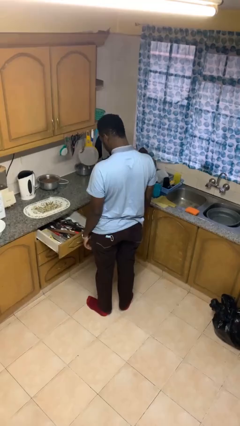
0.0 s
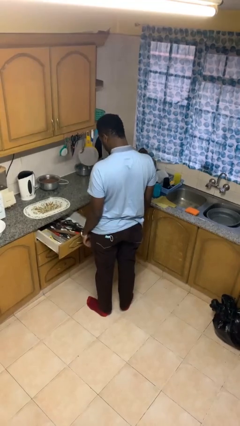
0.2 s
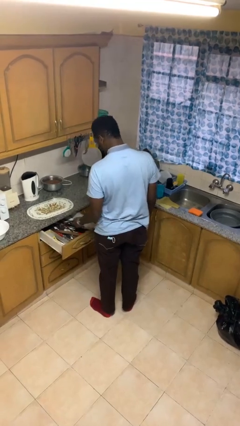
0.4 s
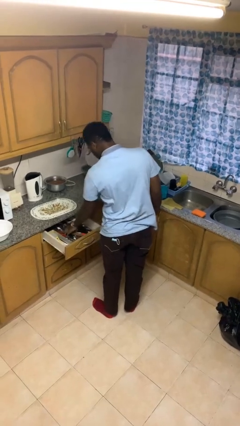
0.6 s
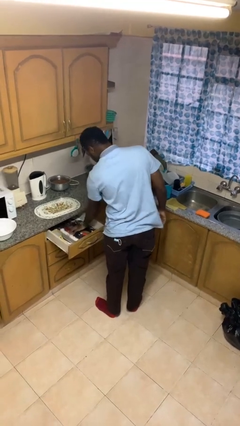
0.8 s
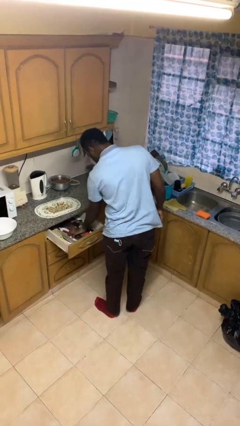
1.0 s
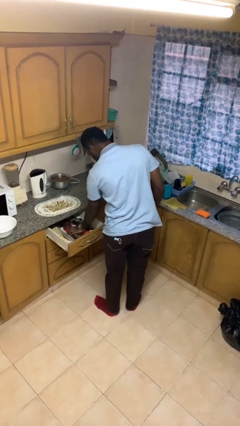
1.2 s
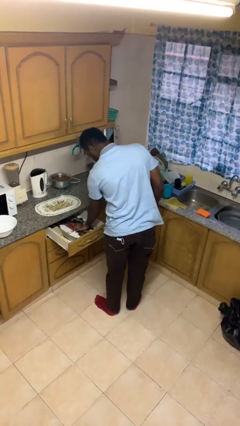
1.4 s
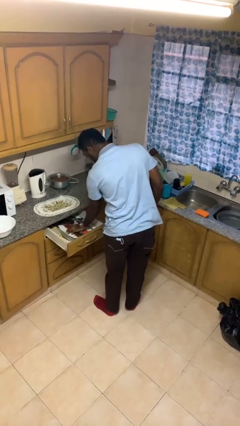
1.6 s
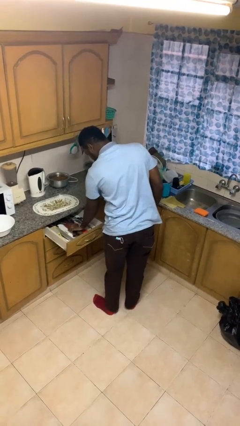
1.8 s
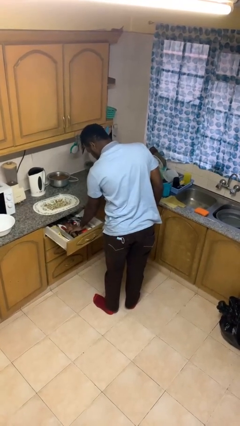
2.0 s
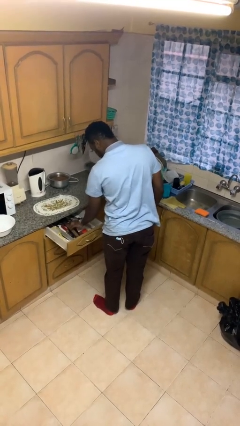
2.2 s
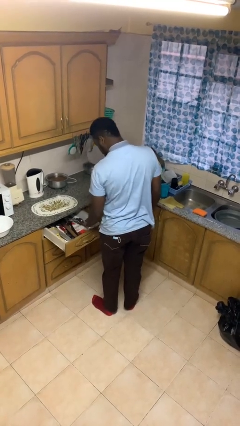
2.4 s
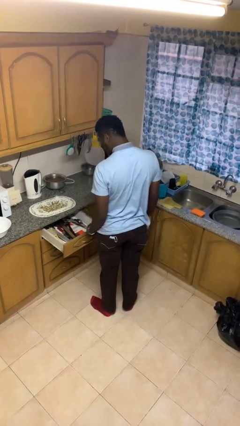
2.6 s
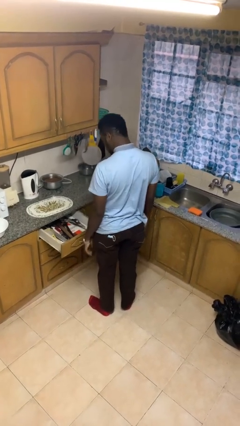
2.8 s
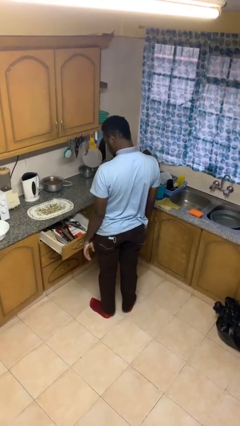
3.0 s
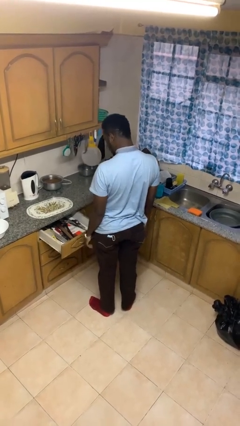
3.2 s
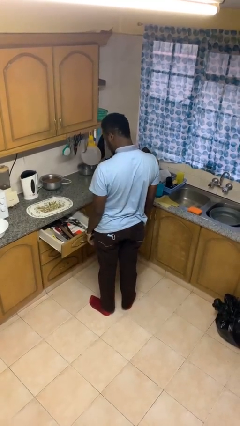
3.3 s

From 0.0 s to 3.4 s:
person searches in kitchen drawer

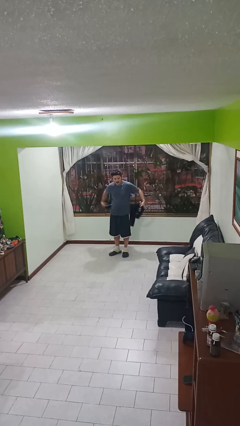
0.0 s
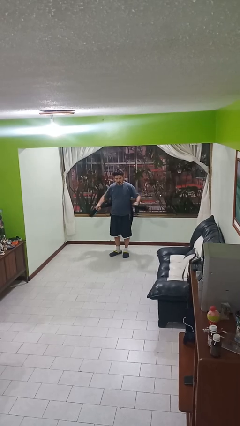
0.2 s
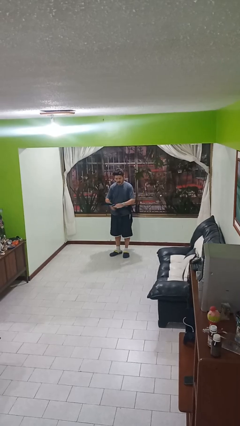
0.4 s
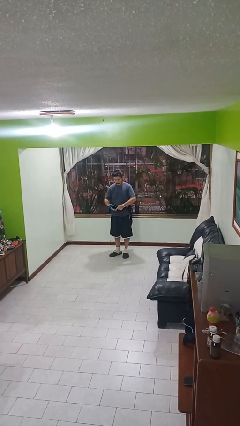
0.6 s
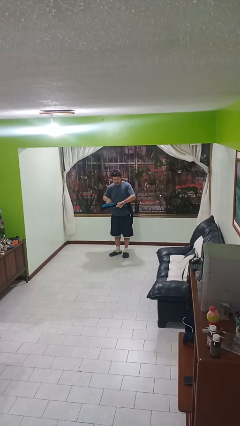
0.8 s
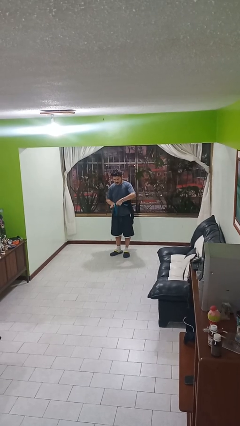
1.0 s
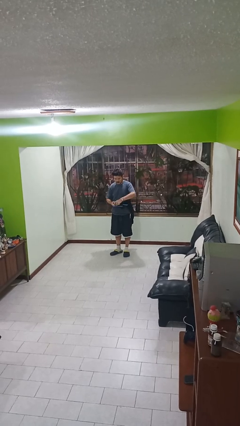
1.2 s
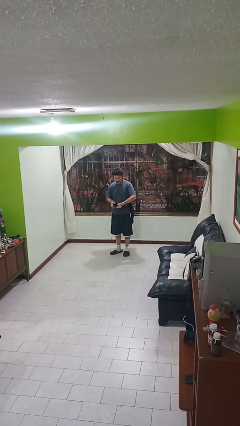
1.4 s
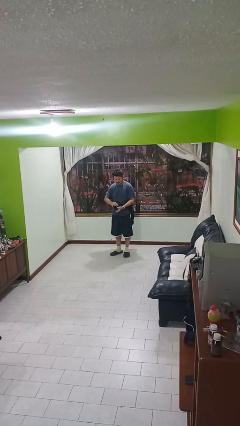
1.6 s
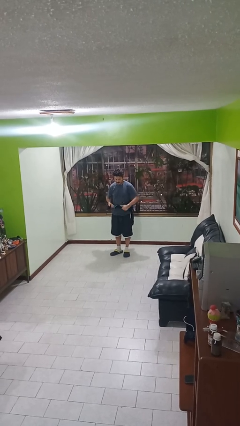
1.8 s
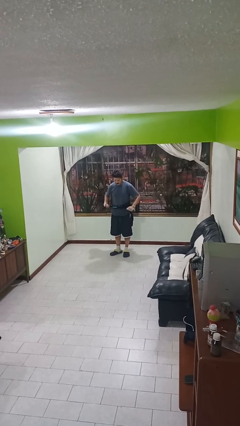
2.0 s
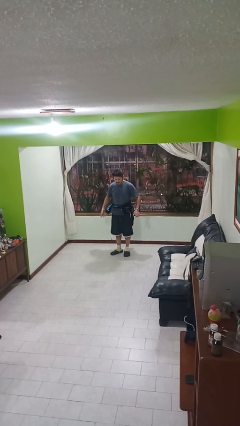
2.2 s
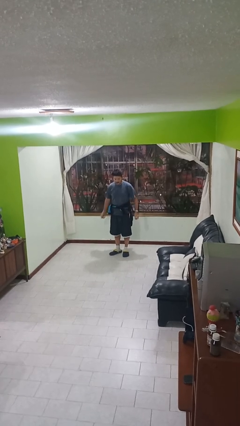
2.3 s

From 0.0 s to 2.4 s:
person ties jacket around waist

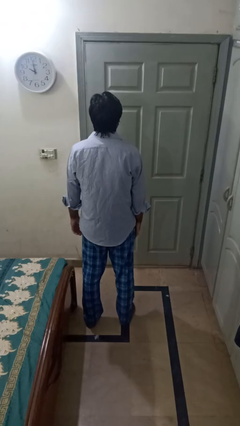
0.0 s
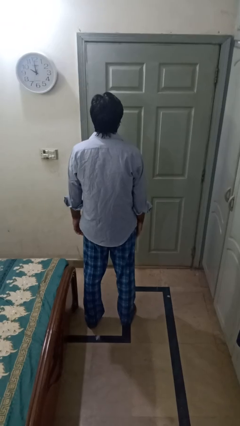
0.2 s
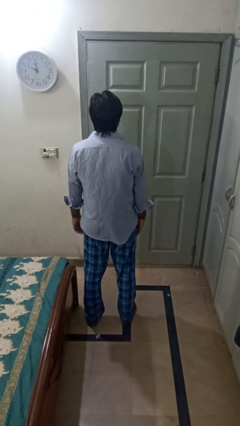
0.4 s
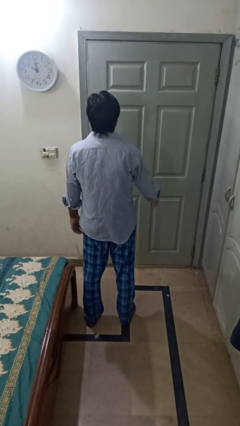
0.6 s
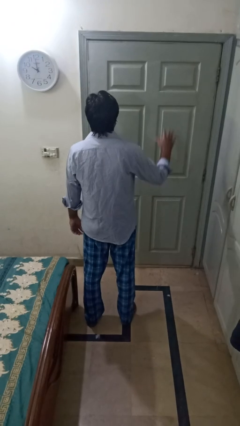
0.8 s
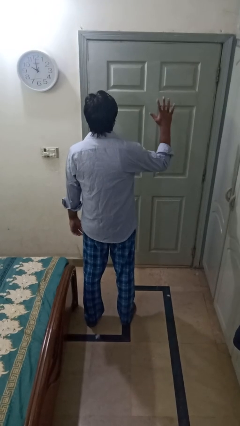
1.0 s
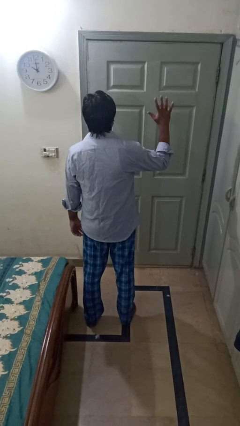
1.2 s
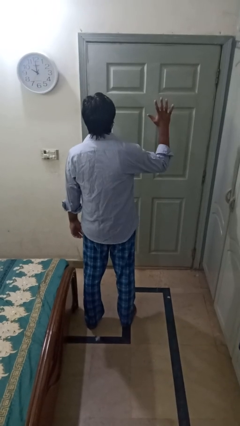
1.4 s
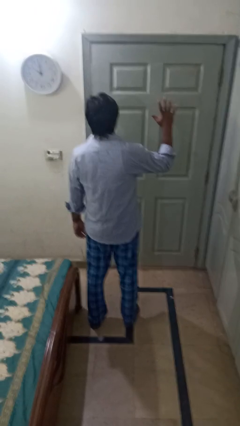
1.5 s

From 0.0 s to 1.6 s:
person gestures number five

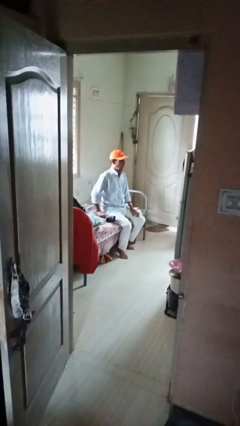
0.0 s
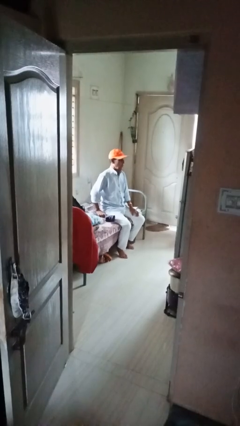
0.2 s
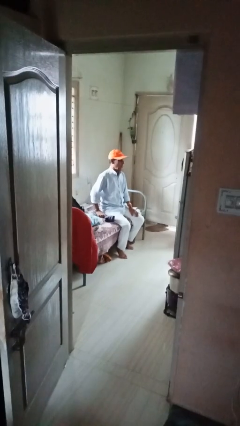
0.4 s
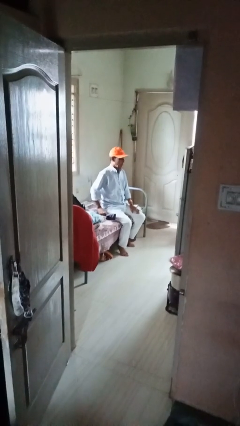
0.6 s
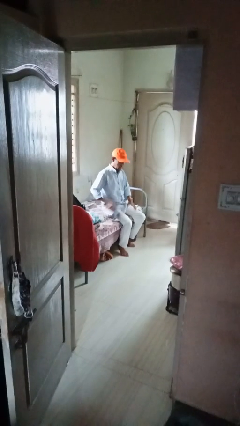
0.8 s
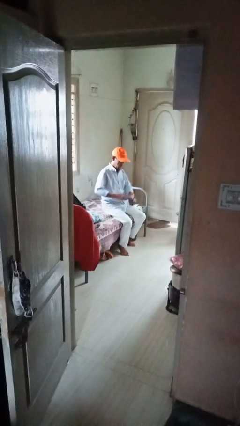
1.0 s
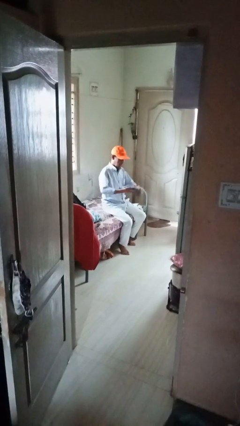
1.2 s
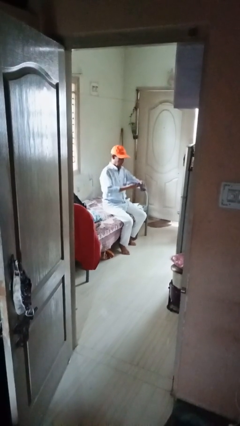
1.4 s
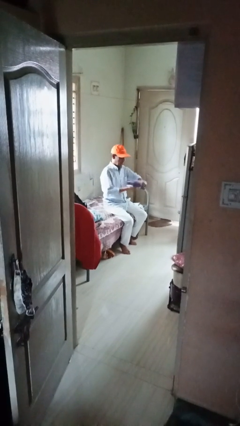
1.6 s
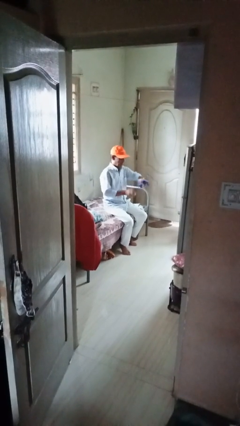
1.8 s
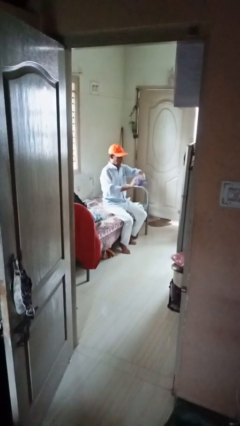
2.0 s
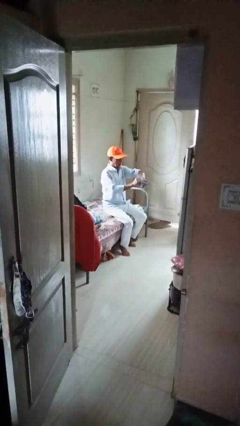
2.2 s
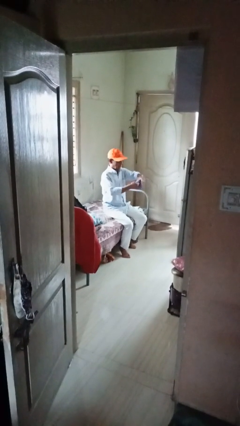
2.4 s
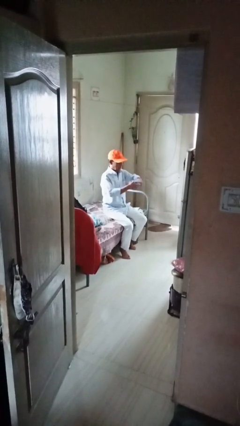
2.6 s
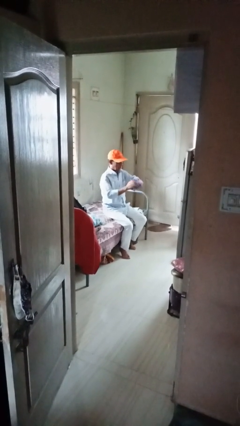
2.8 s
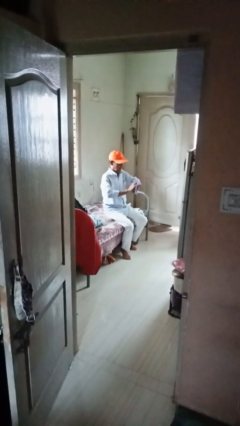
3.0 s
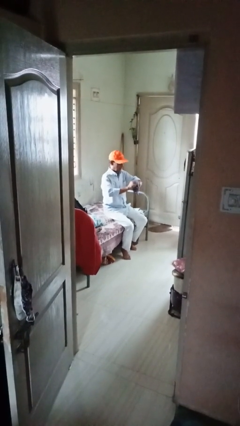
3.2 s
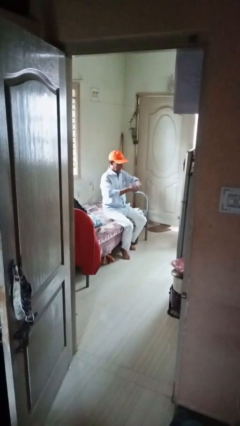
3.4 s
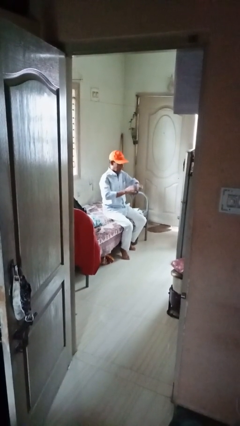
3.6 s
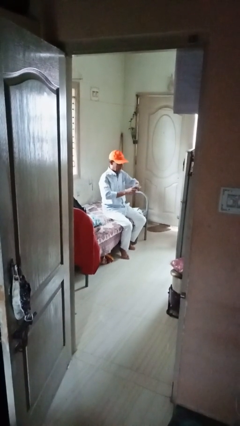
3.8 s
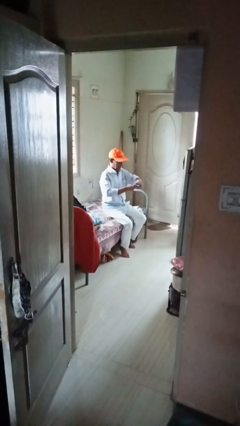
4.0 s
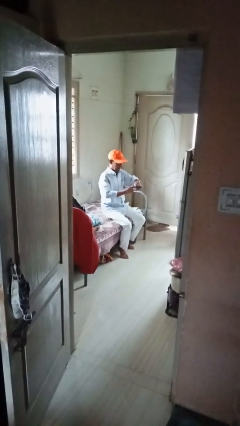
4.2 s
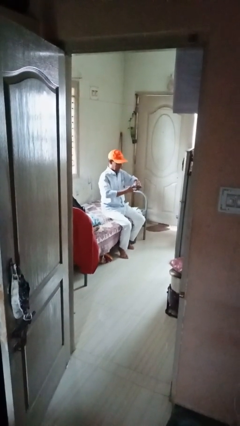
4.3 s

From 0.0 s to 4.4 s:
person squeezes object

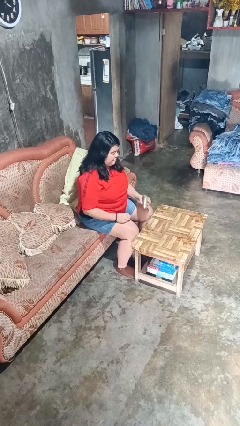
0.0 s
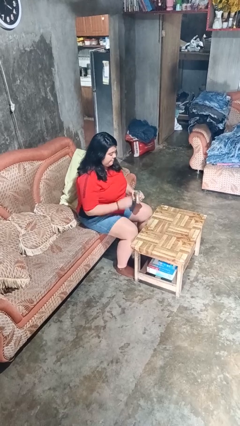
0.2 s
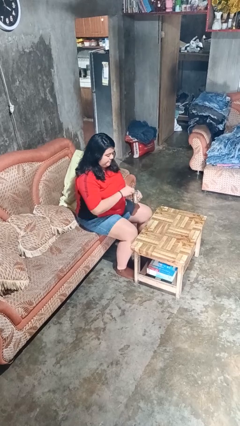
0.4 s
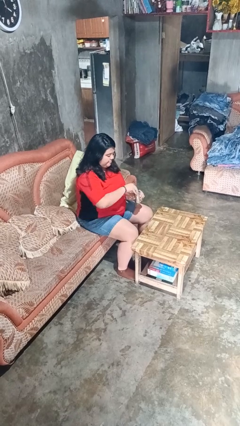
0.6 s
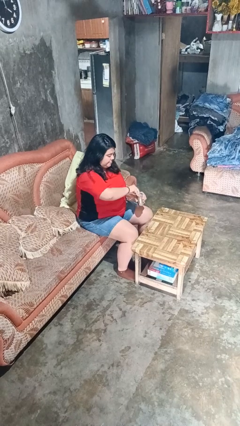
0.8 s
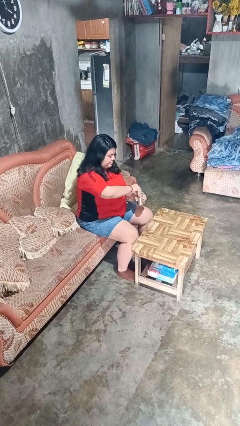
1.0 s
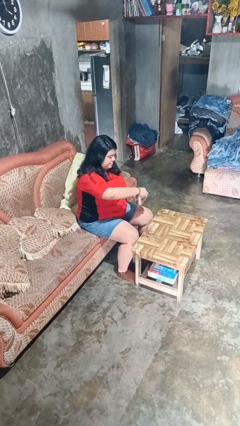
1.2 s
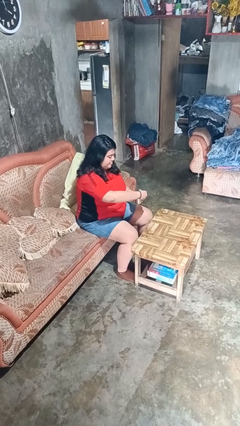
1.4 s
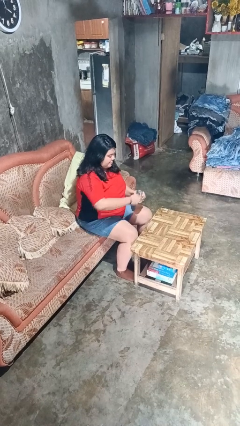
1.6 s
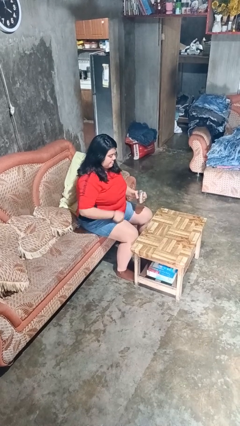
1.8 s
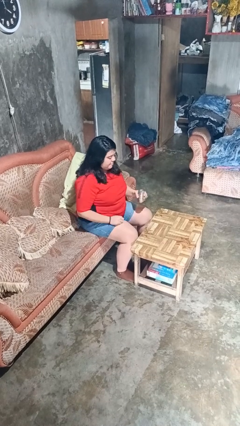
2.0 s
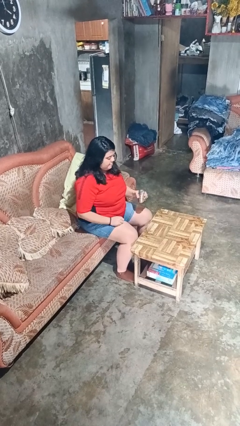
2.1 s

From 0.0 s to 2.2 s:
person opens beverage can

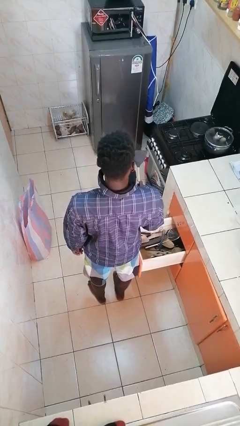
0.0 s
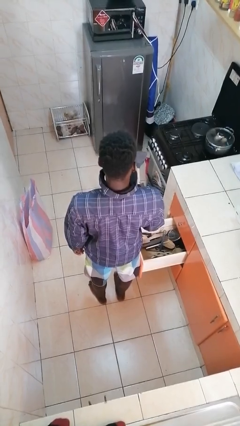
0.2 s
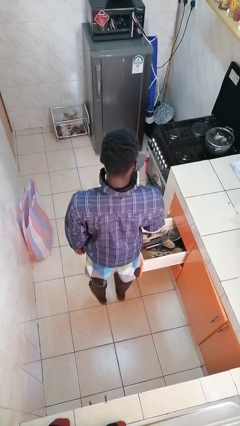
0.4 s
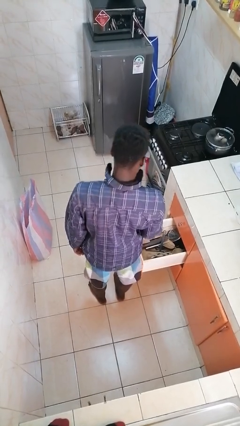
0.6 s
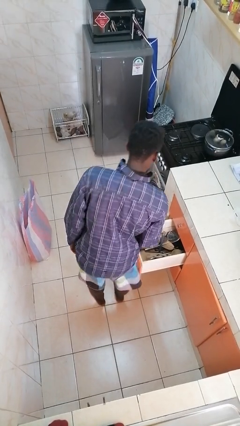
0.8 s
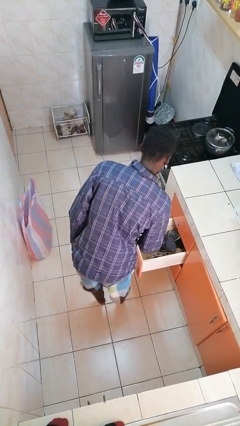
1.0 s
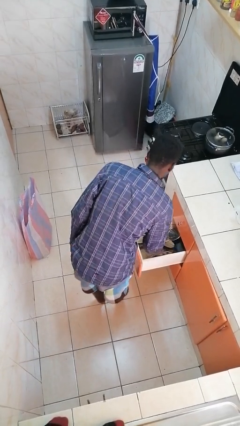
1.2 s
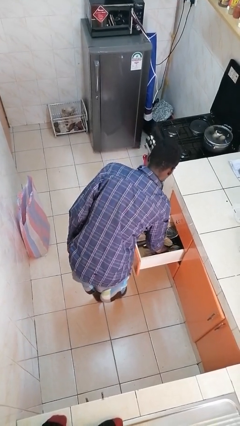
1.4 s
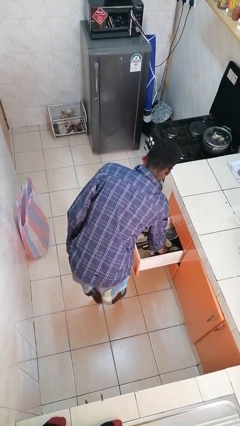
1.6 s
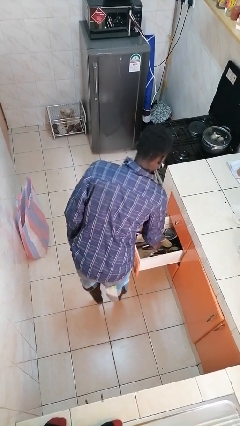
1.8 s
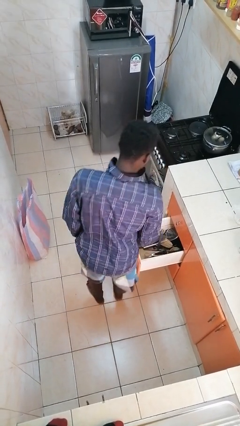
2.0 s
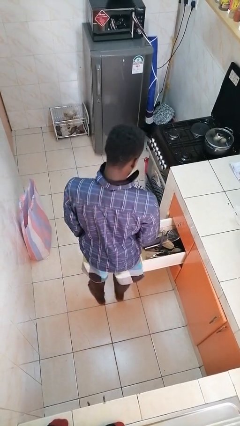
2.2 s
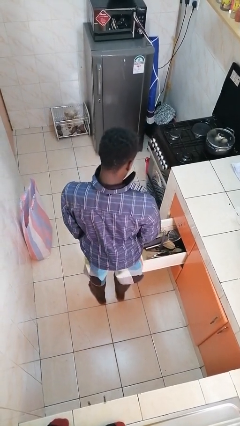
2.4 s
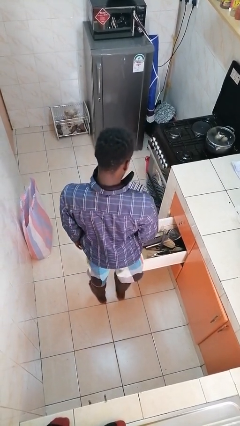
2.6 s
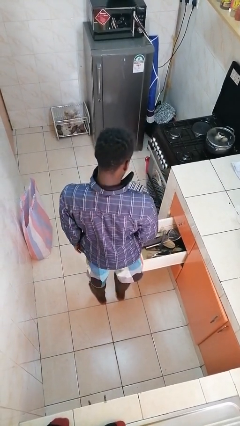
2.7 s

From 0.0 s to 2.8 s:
person puts object into kitchen drawer

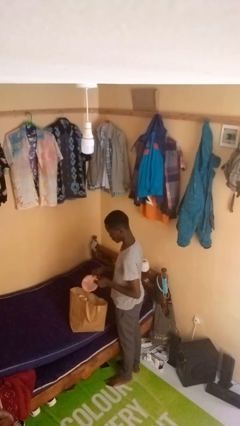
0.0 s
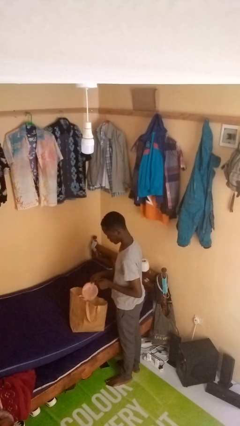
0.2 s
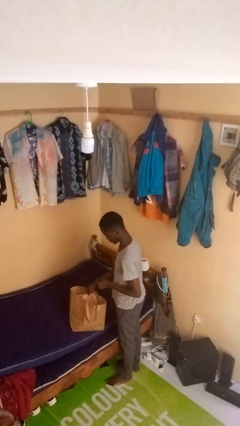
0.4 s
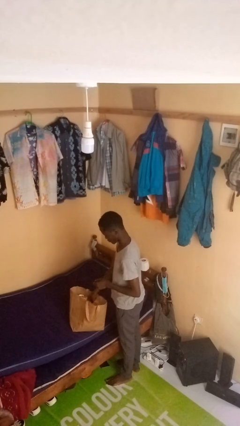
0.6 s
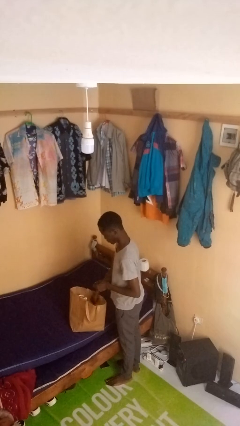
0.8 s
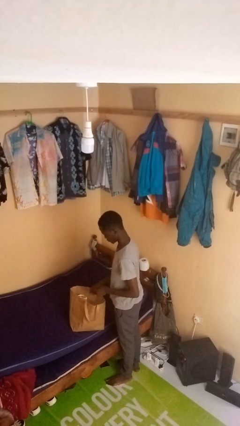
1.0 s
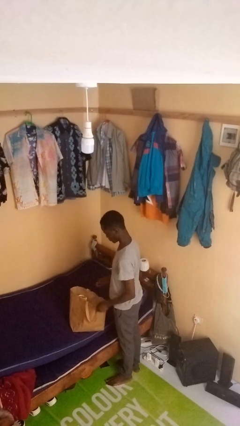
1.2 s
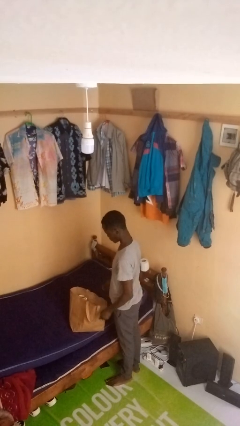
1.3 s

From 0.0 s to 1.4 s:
person puts object into bag
